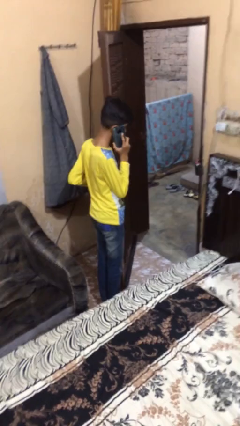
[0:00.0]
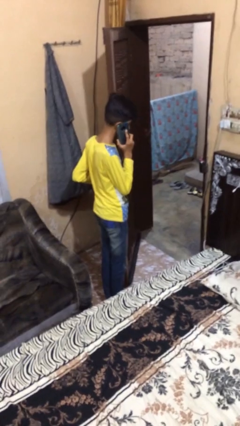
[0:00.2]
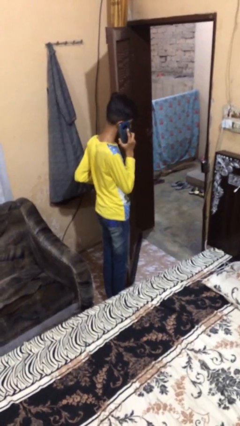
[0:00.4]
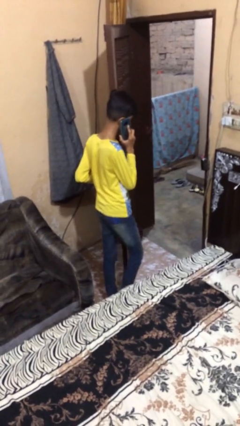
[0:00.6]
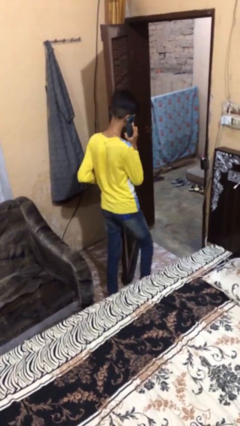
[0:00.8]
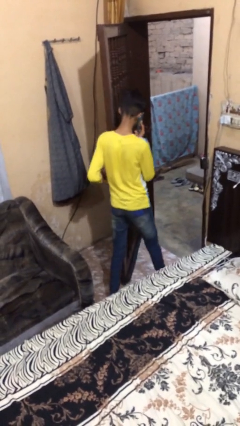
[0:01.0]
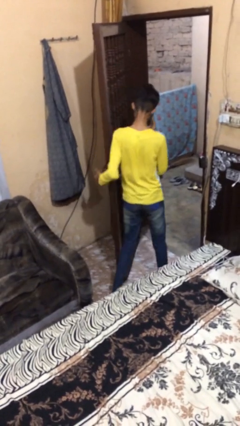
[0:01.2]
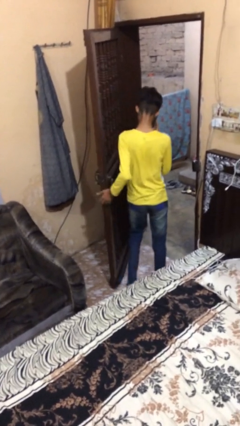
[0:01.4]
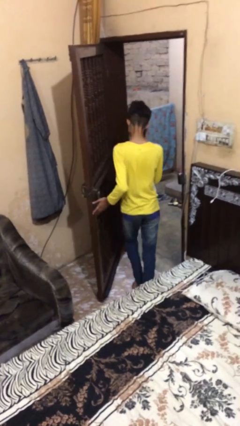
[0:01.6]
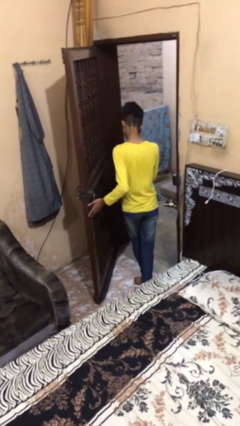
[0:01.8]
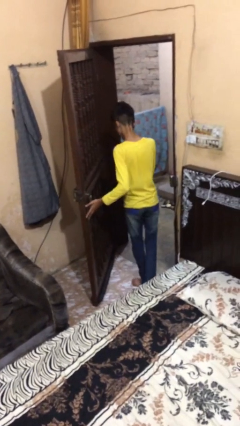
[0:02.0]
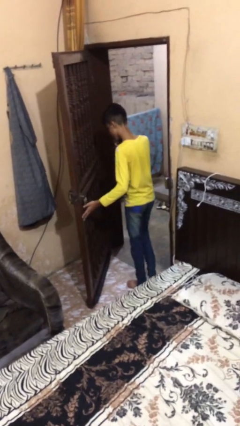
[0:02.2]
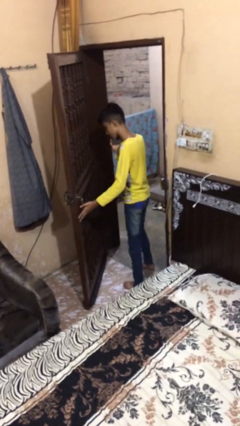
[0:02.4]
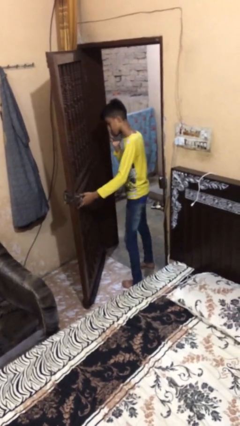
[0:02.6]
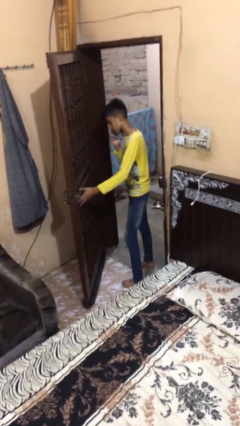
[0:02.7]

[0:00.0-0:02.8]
person exits scene through structure

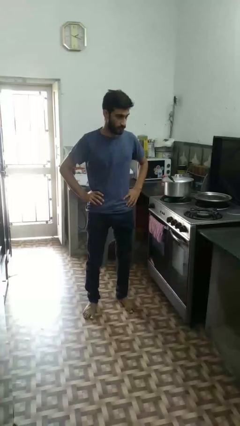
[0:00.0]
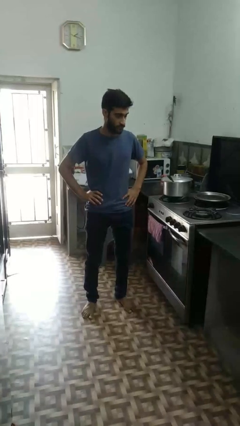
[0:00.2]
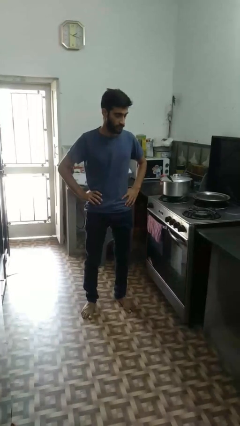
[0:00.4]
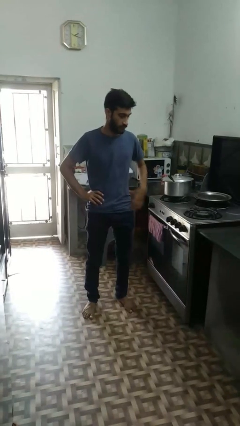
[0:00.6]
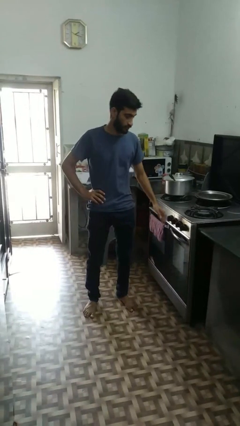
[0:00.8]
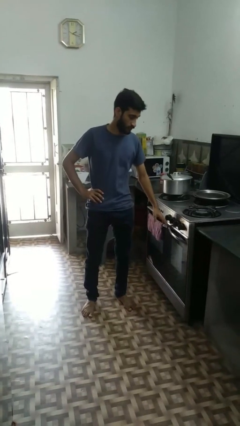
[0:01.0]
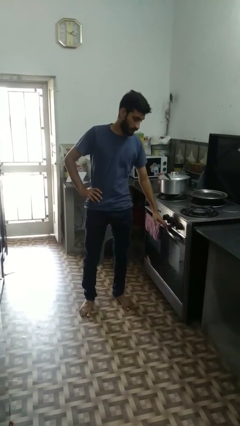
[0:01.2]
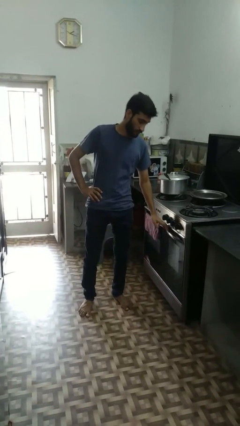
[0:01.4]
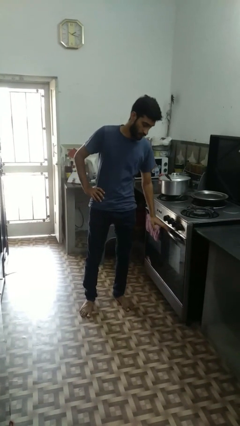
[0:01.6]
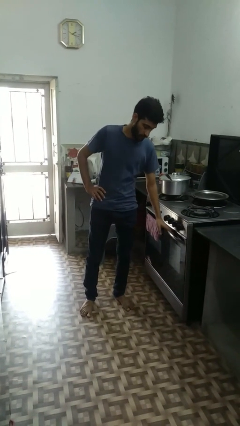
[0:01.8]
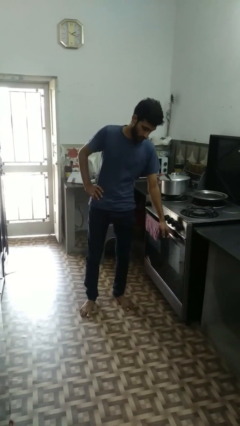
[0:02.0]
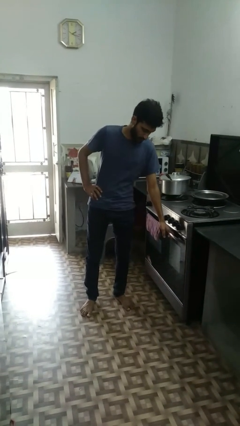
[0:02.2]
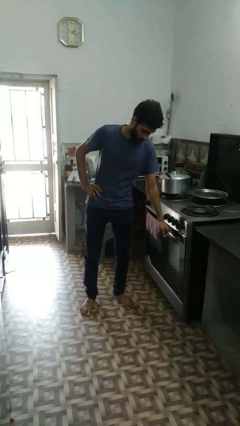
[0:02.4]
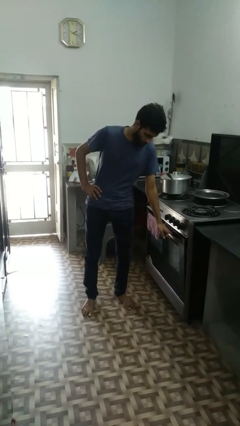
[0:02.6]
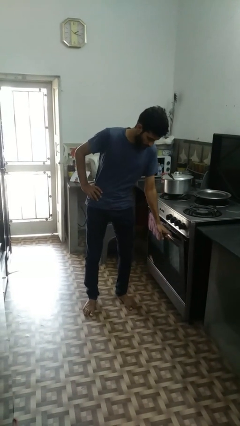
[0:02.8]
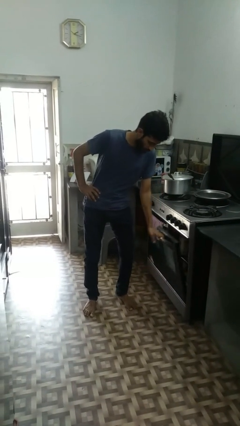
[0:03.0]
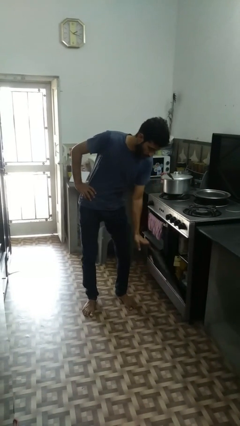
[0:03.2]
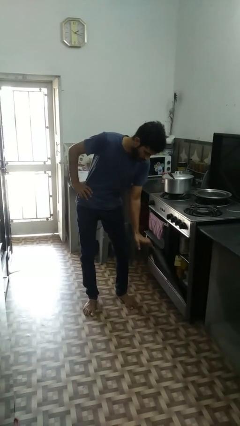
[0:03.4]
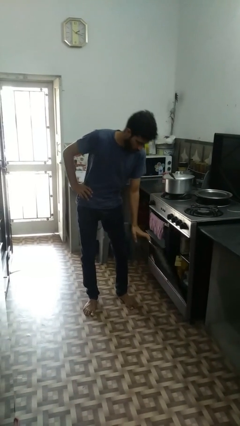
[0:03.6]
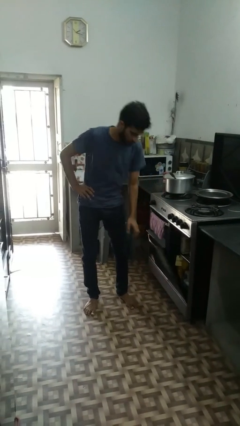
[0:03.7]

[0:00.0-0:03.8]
person opens dishwasher

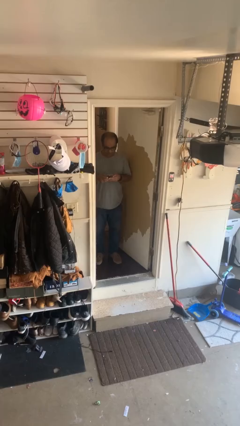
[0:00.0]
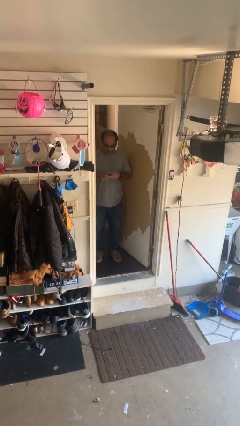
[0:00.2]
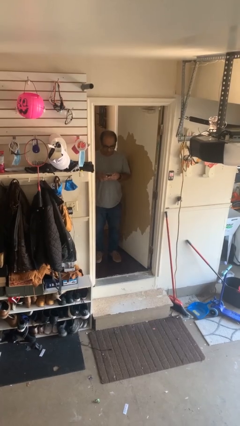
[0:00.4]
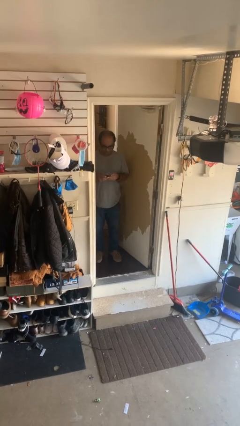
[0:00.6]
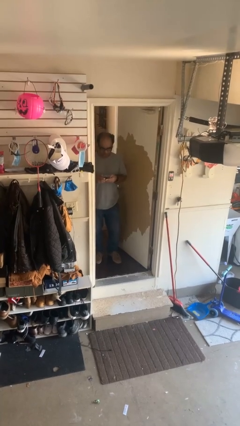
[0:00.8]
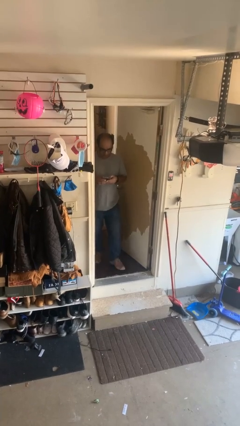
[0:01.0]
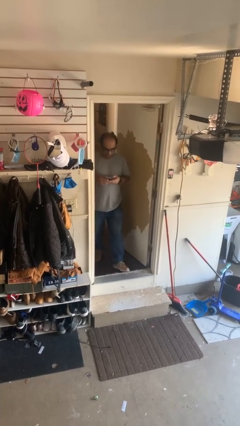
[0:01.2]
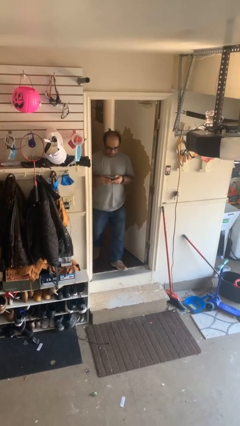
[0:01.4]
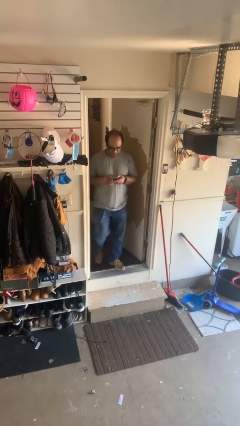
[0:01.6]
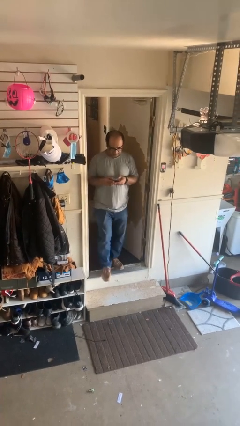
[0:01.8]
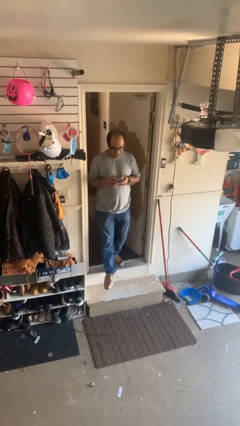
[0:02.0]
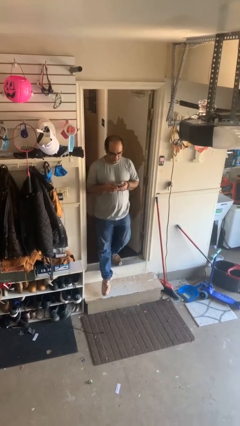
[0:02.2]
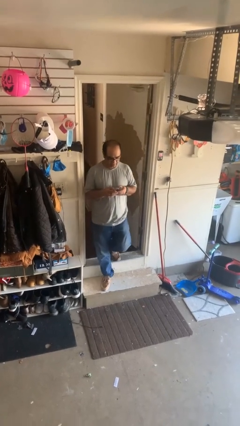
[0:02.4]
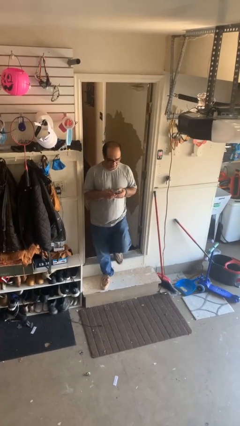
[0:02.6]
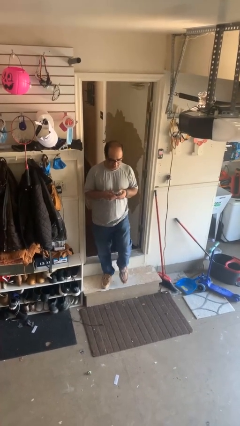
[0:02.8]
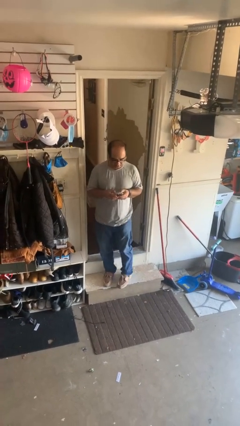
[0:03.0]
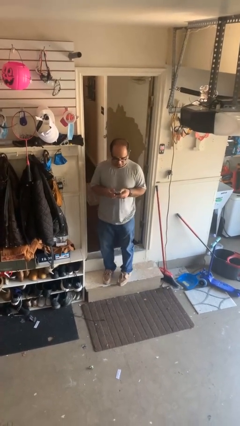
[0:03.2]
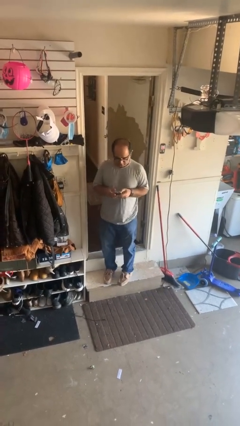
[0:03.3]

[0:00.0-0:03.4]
person enters scene through structure

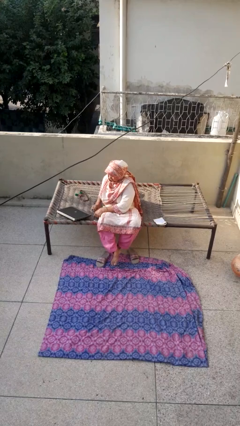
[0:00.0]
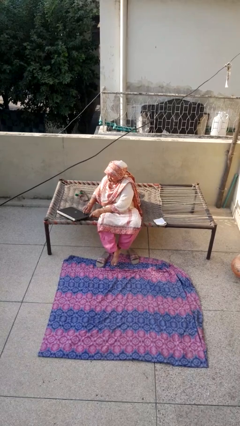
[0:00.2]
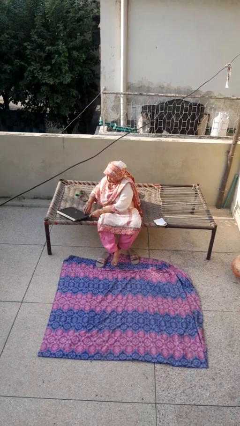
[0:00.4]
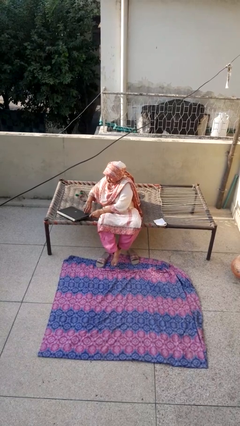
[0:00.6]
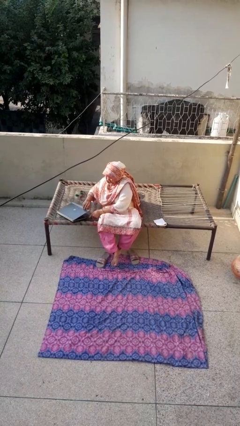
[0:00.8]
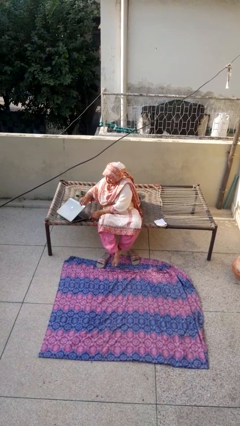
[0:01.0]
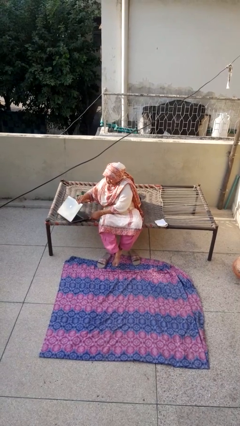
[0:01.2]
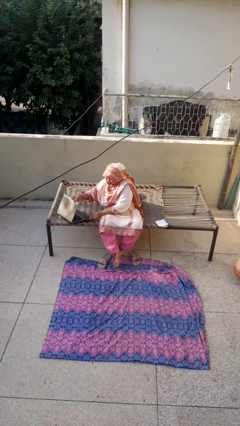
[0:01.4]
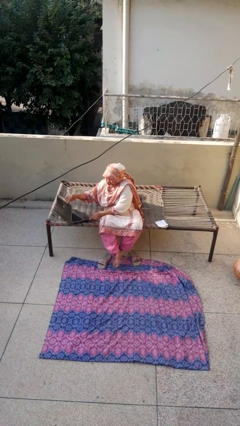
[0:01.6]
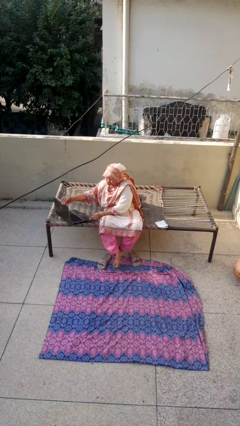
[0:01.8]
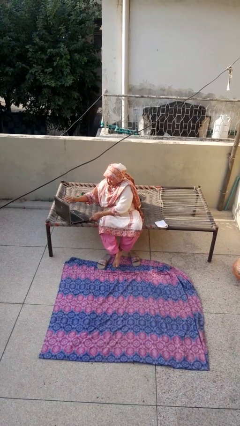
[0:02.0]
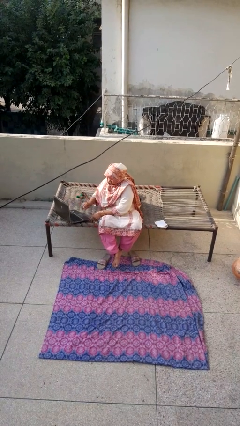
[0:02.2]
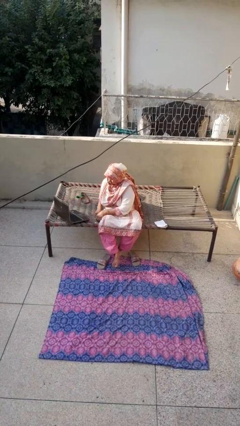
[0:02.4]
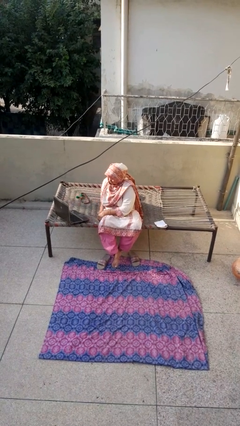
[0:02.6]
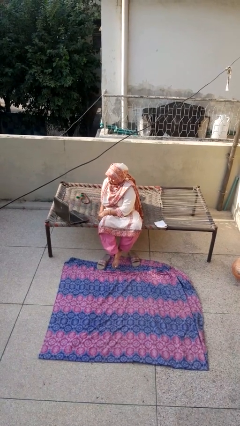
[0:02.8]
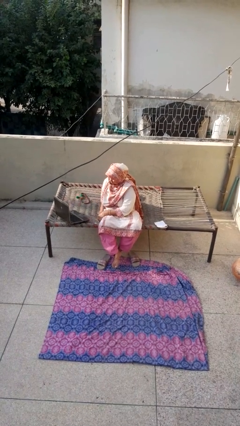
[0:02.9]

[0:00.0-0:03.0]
person opens laptop

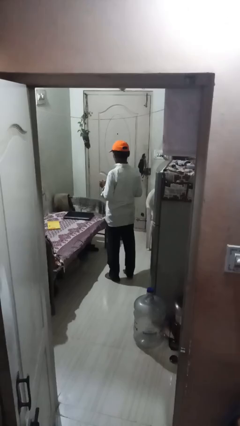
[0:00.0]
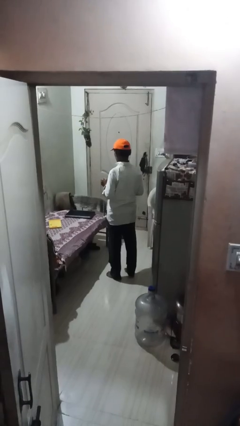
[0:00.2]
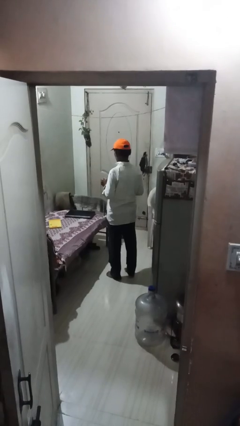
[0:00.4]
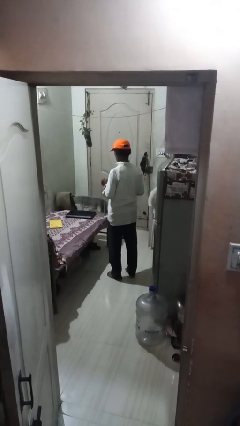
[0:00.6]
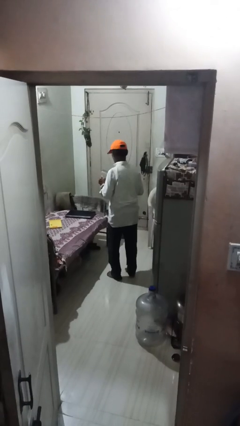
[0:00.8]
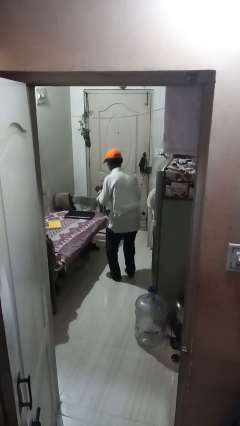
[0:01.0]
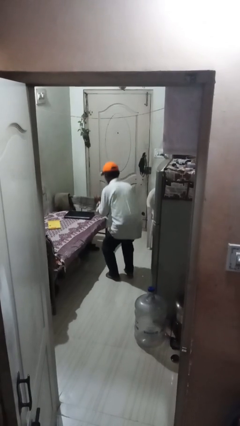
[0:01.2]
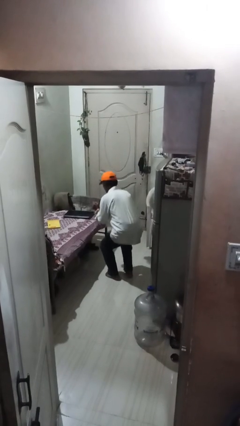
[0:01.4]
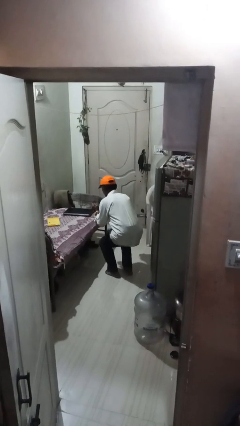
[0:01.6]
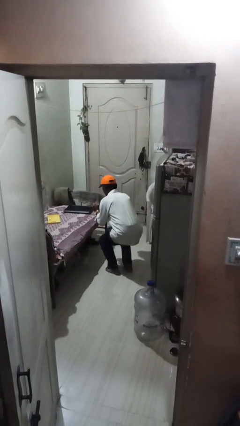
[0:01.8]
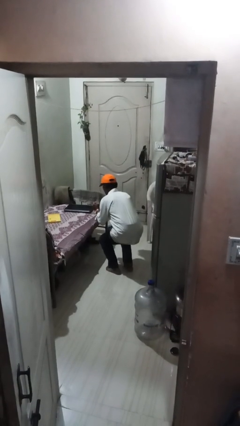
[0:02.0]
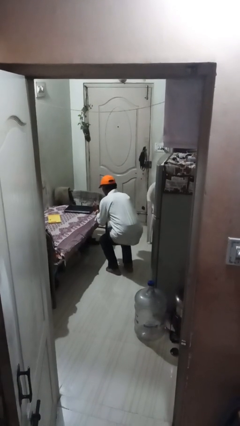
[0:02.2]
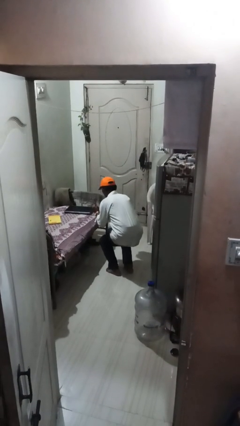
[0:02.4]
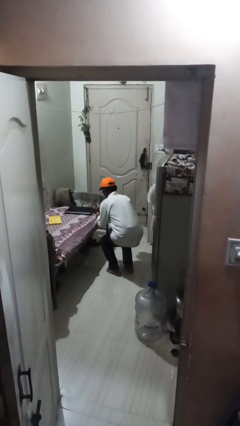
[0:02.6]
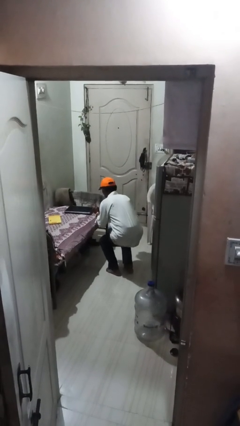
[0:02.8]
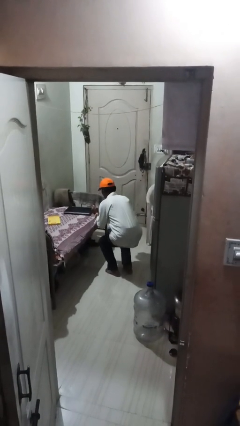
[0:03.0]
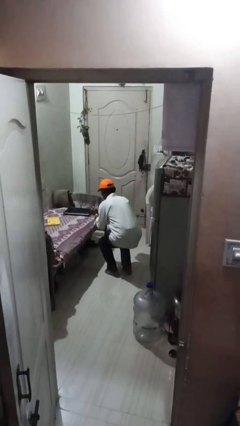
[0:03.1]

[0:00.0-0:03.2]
person squats

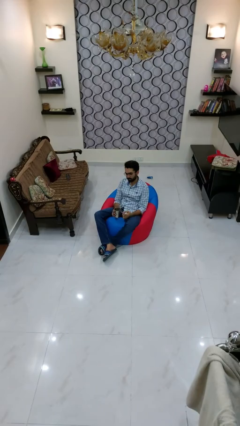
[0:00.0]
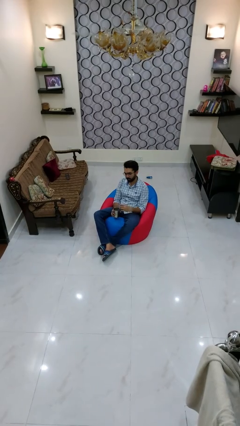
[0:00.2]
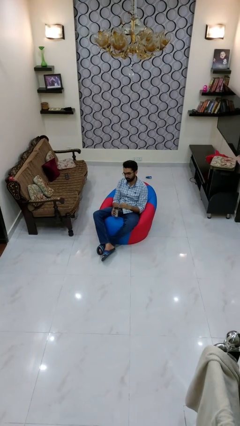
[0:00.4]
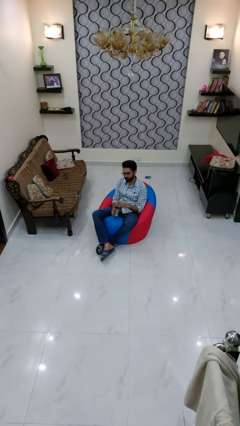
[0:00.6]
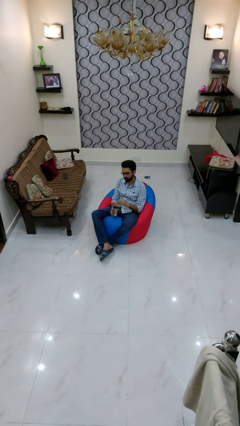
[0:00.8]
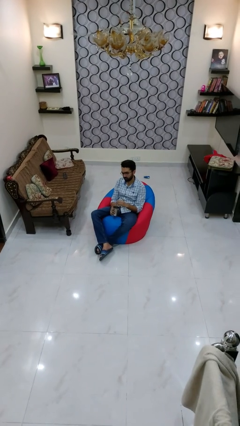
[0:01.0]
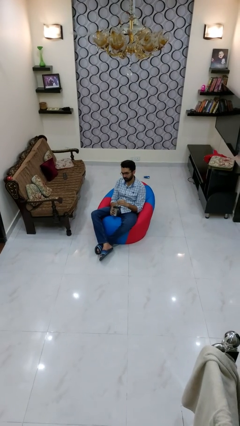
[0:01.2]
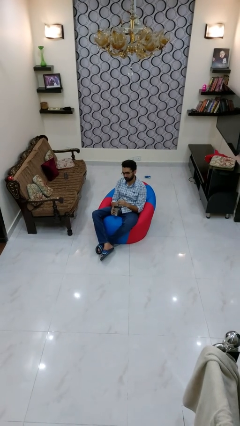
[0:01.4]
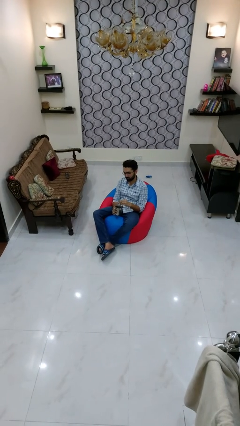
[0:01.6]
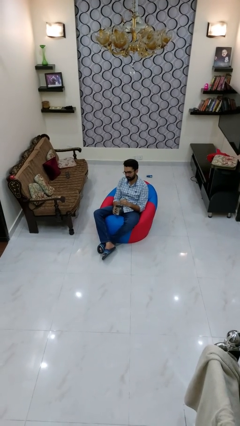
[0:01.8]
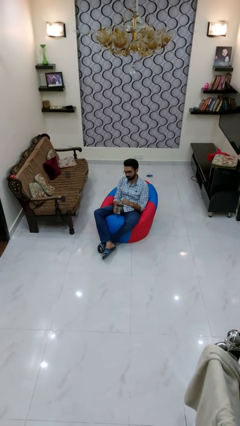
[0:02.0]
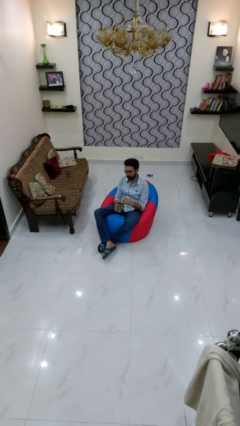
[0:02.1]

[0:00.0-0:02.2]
person stirs mug
